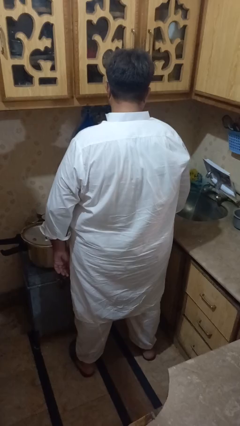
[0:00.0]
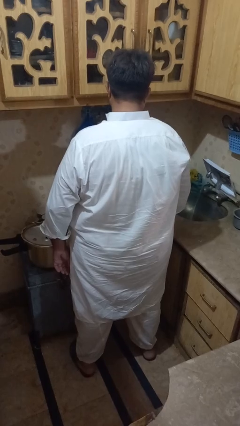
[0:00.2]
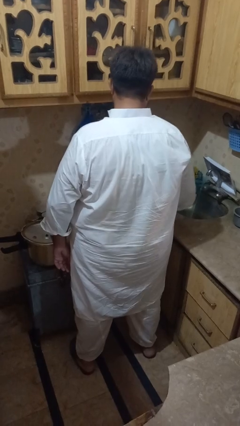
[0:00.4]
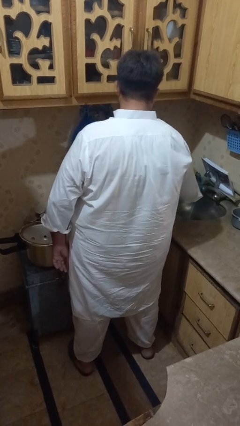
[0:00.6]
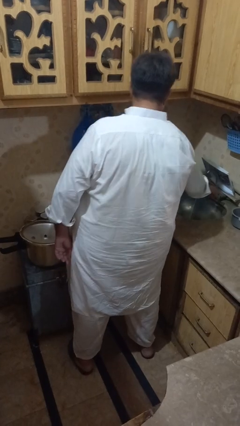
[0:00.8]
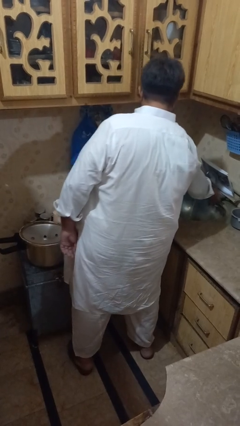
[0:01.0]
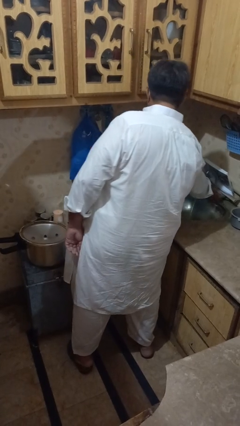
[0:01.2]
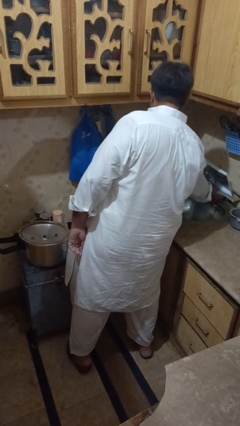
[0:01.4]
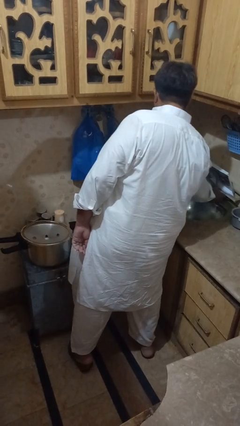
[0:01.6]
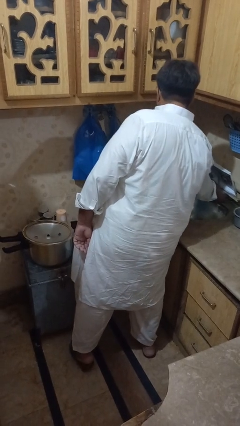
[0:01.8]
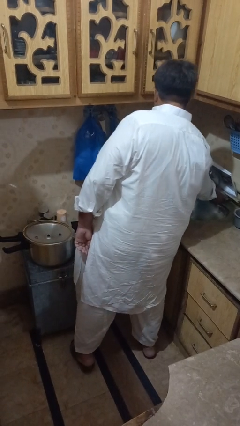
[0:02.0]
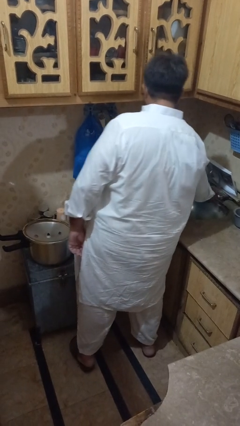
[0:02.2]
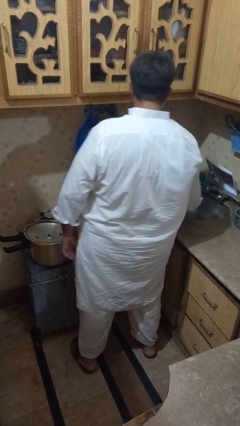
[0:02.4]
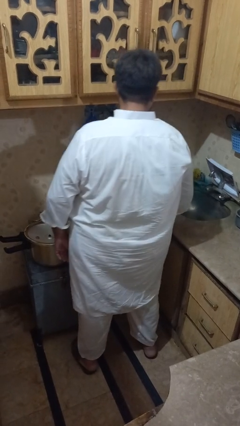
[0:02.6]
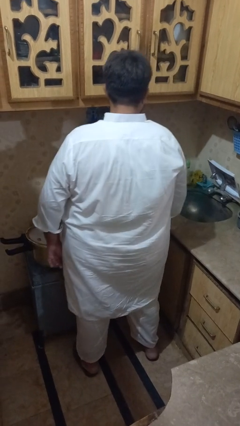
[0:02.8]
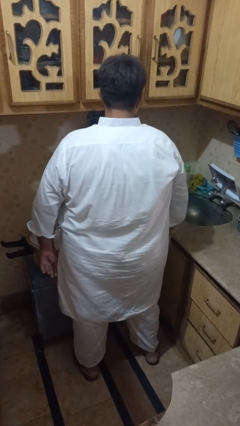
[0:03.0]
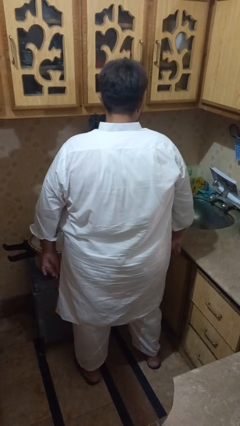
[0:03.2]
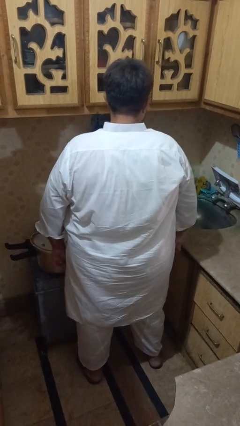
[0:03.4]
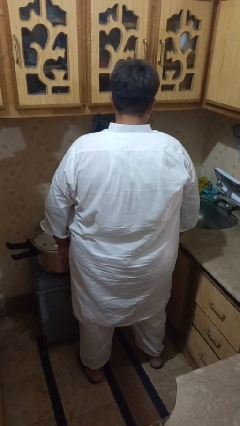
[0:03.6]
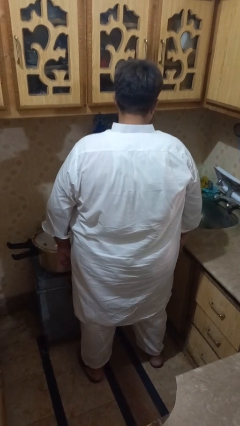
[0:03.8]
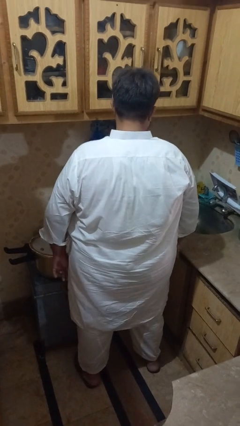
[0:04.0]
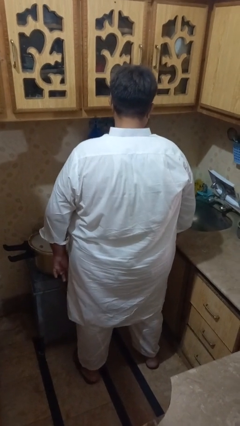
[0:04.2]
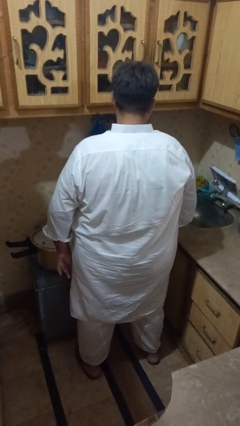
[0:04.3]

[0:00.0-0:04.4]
person turns off faucet

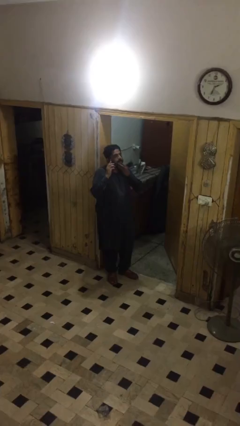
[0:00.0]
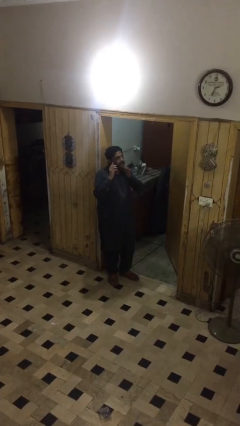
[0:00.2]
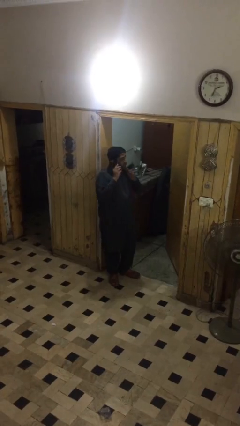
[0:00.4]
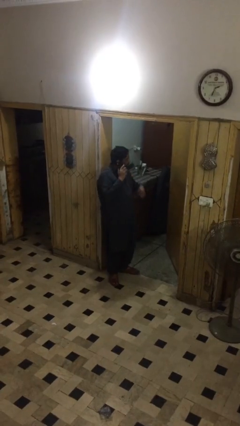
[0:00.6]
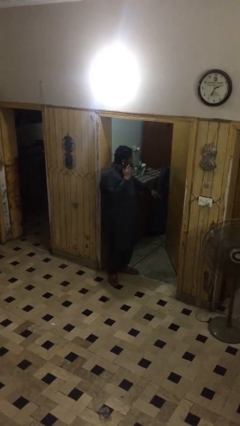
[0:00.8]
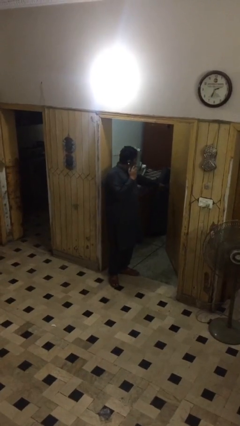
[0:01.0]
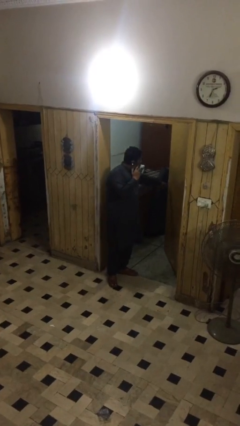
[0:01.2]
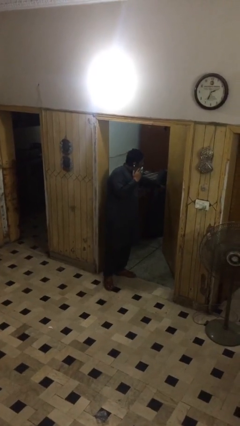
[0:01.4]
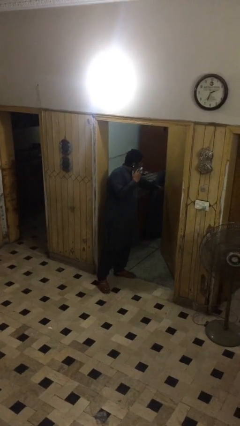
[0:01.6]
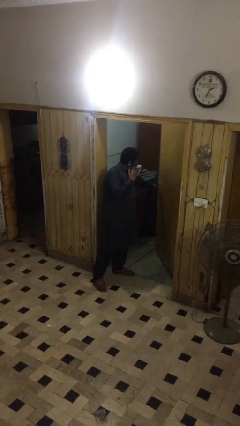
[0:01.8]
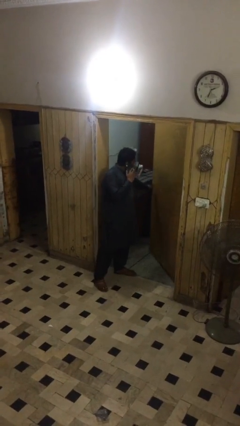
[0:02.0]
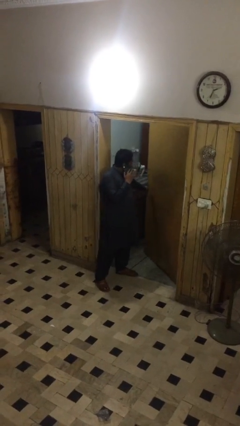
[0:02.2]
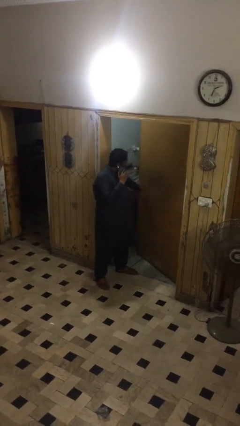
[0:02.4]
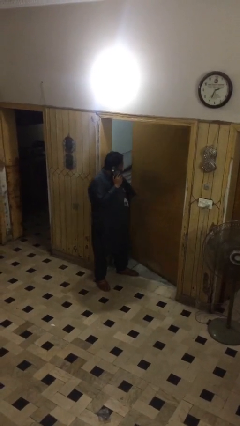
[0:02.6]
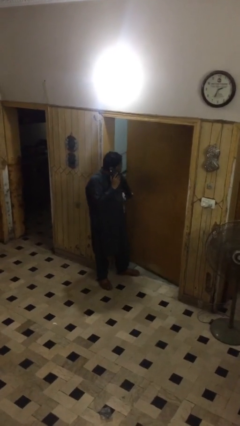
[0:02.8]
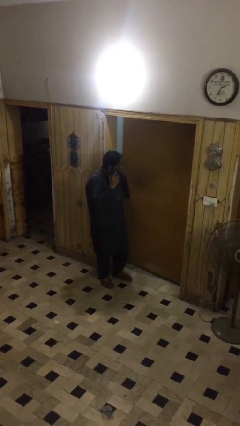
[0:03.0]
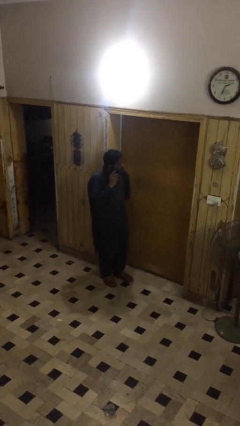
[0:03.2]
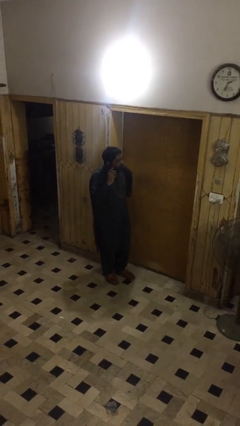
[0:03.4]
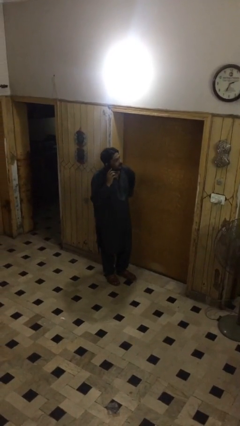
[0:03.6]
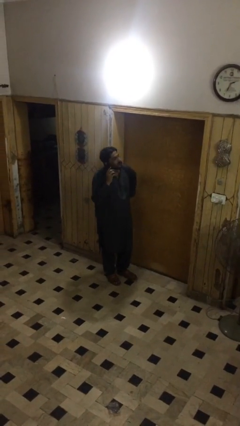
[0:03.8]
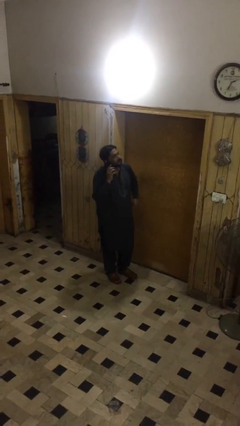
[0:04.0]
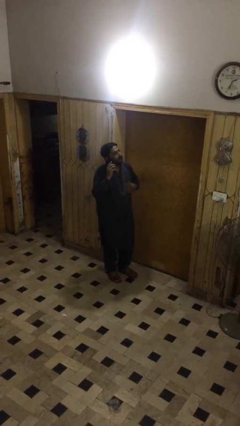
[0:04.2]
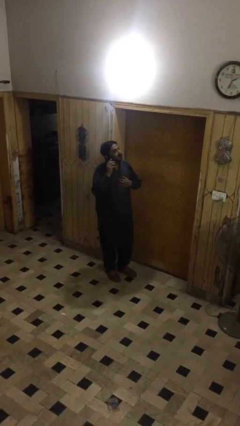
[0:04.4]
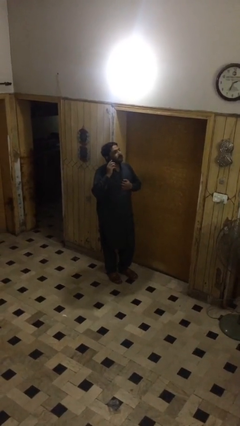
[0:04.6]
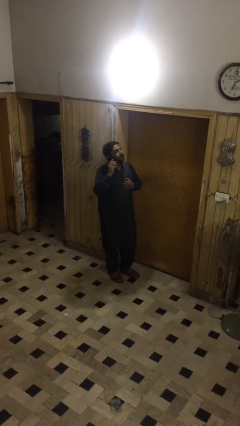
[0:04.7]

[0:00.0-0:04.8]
person closes facility door

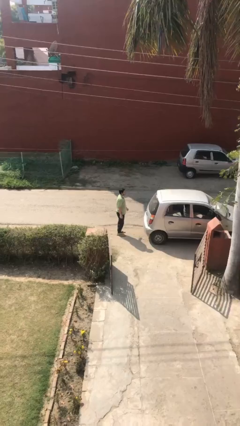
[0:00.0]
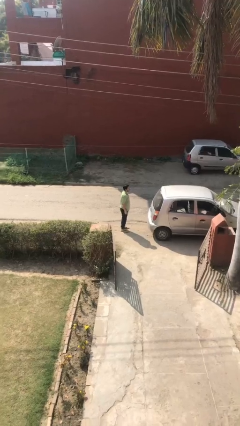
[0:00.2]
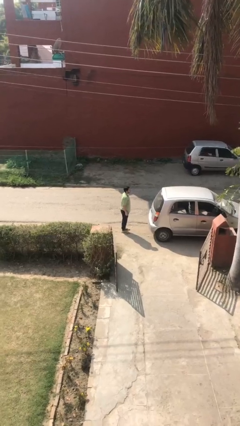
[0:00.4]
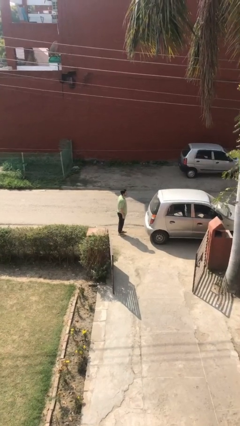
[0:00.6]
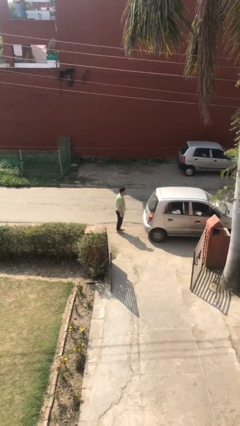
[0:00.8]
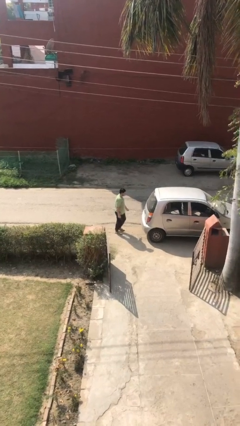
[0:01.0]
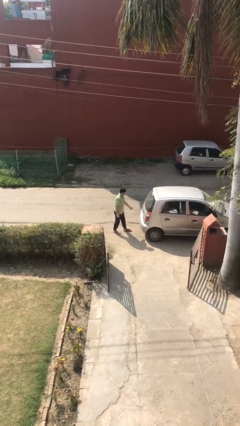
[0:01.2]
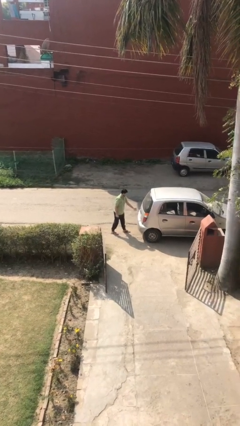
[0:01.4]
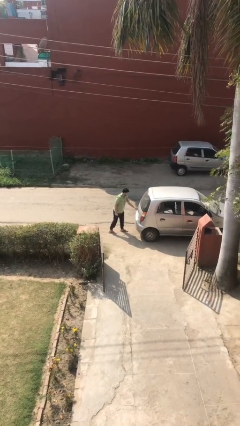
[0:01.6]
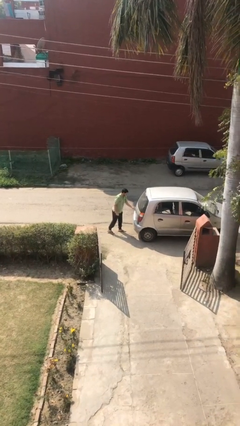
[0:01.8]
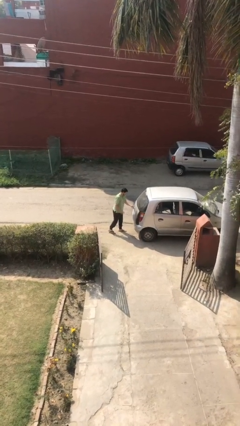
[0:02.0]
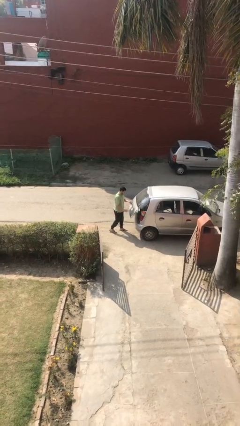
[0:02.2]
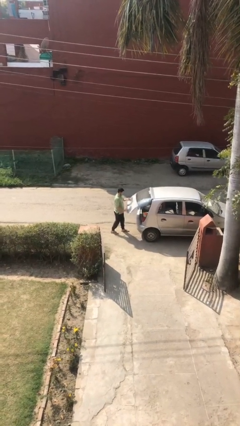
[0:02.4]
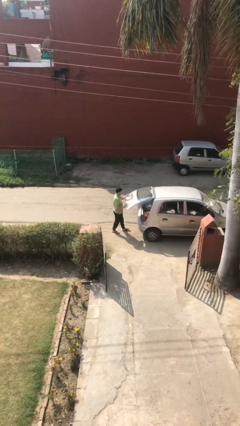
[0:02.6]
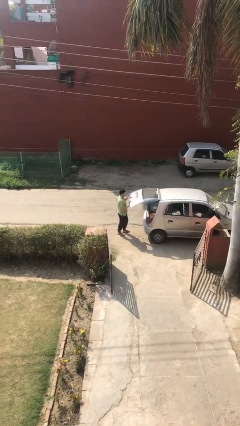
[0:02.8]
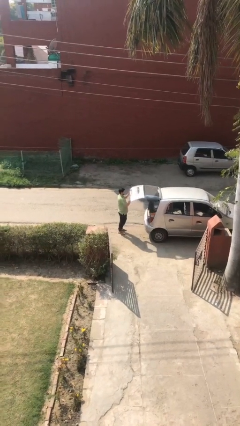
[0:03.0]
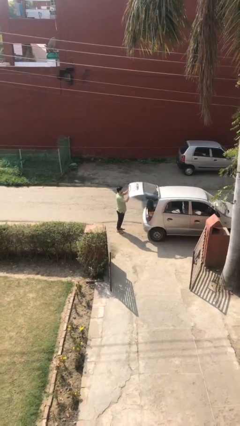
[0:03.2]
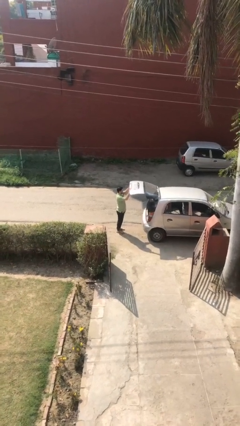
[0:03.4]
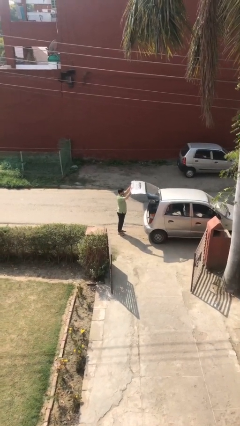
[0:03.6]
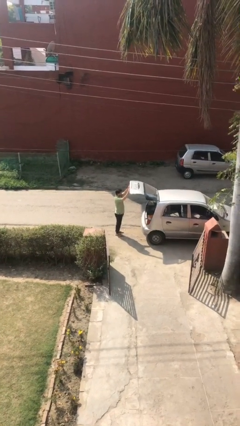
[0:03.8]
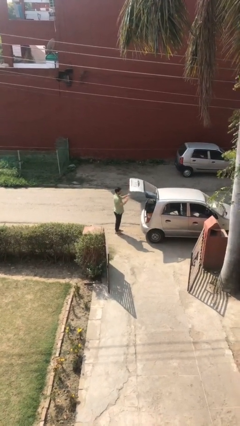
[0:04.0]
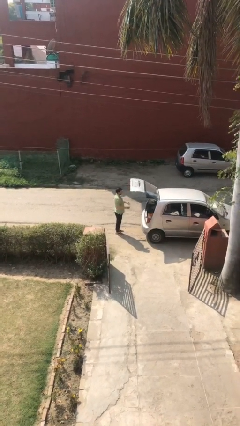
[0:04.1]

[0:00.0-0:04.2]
person opens car trunk

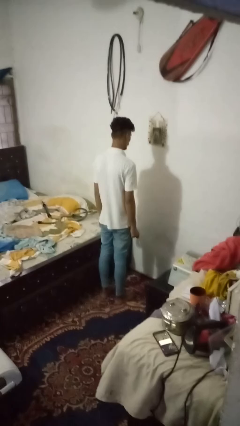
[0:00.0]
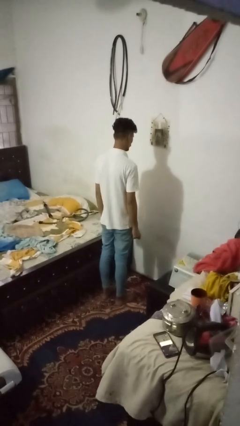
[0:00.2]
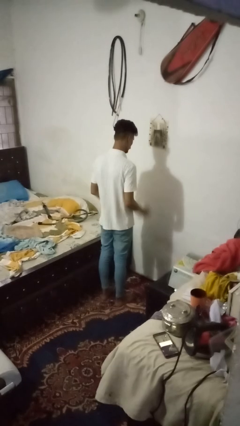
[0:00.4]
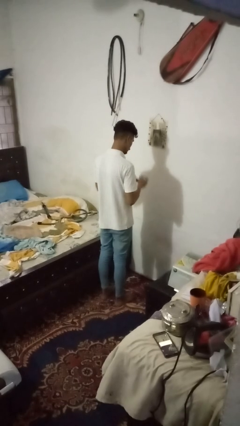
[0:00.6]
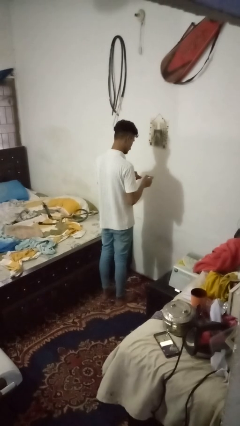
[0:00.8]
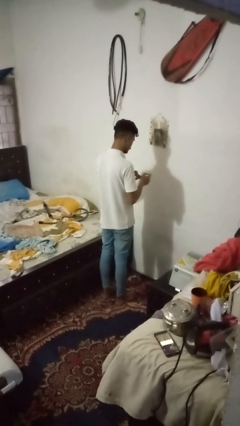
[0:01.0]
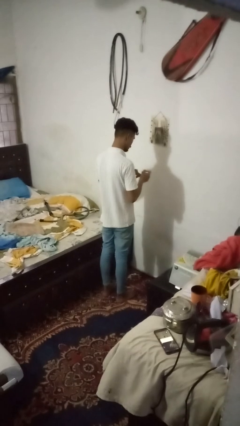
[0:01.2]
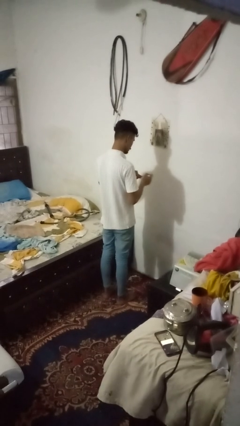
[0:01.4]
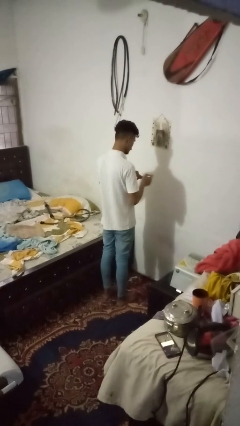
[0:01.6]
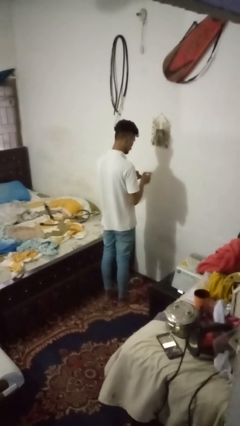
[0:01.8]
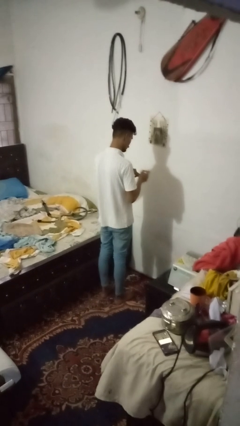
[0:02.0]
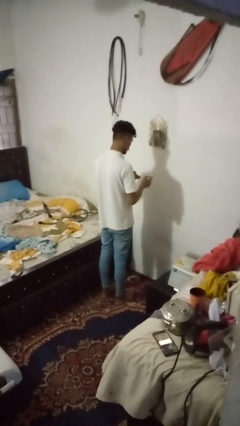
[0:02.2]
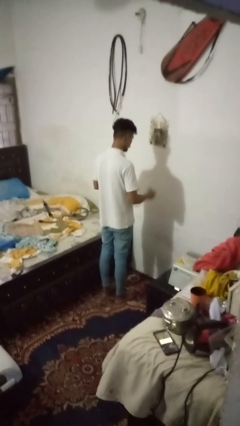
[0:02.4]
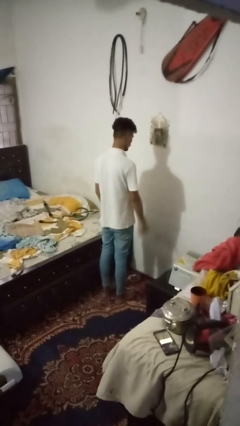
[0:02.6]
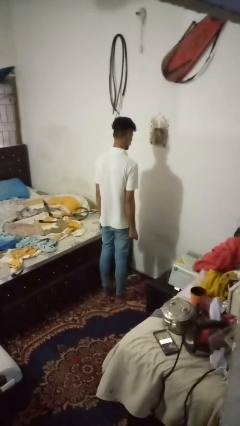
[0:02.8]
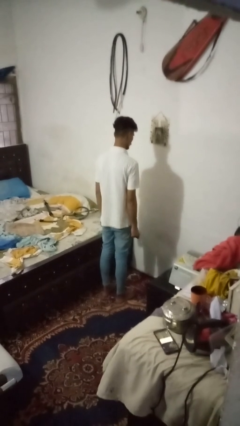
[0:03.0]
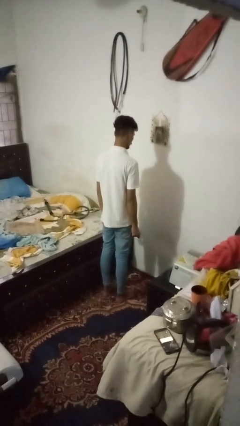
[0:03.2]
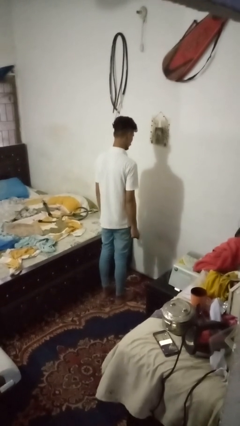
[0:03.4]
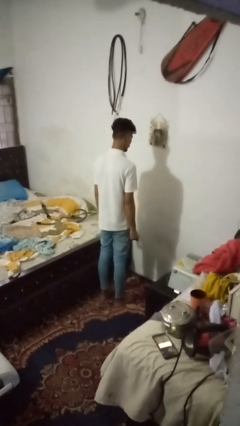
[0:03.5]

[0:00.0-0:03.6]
person paints fingernails

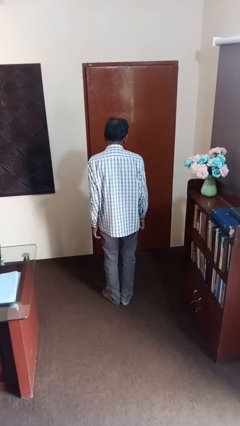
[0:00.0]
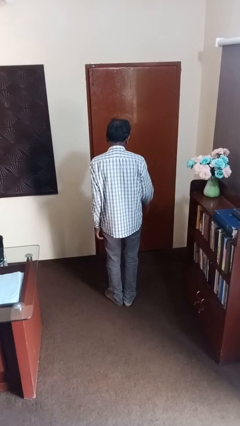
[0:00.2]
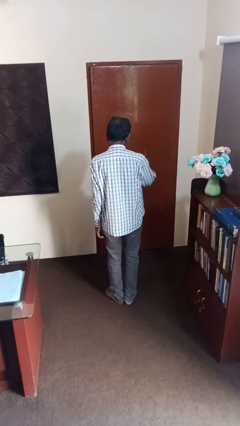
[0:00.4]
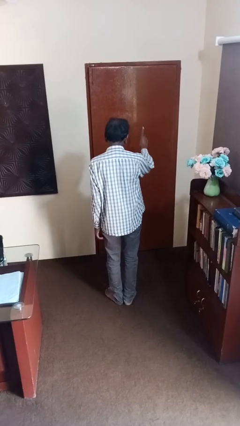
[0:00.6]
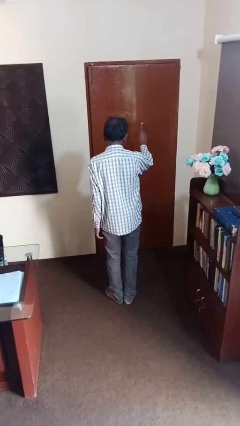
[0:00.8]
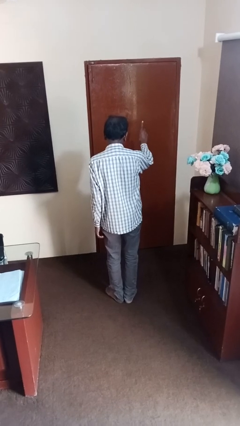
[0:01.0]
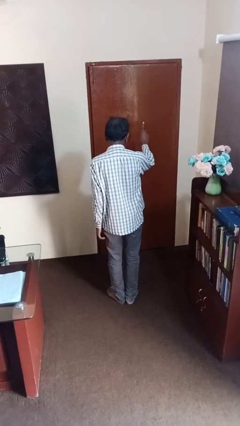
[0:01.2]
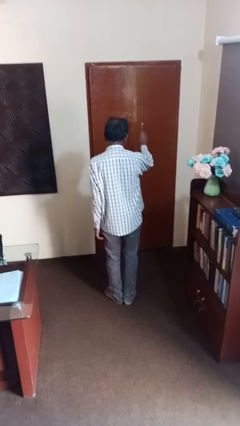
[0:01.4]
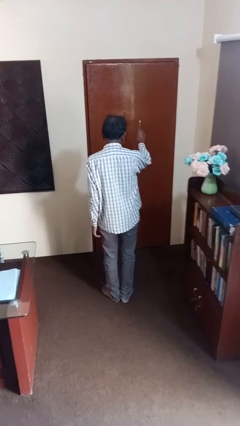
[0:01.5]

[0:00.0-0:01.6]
person gestures number one
